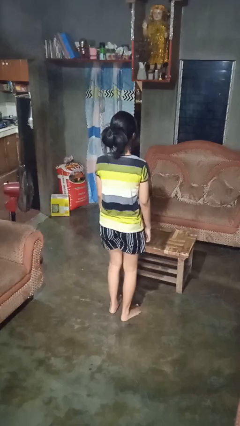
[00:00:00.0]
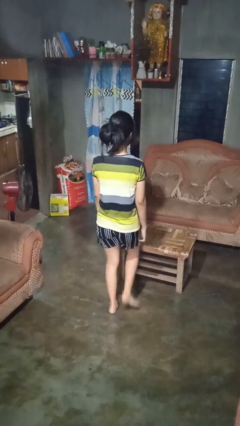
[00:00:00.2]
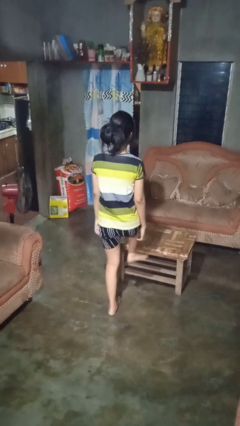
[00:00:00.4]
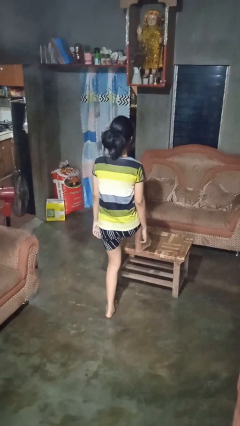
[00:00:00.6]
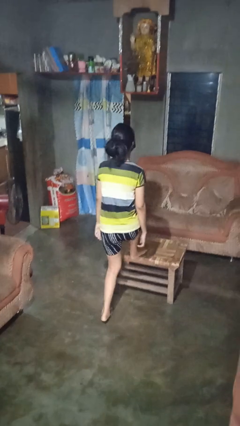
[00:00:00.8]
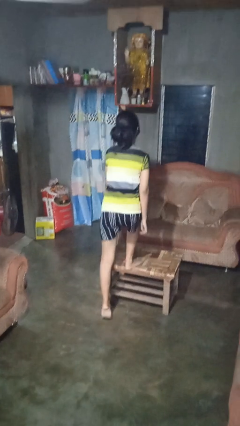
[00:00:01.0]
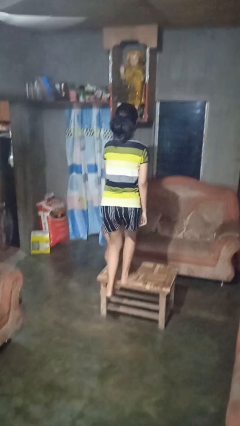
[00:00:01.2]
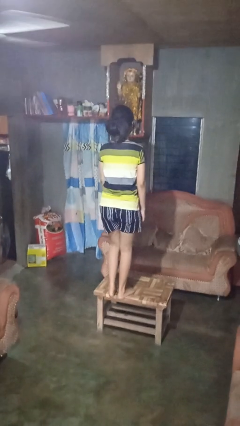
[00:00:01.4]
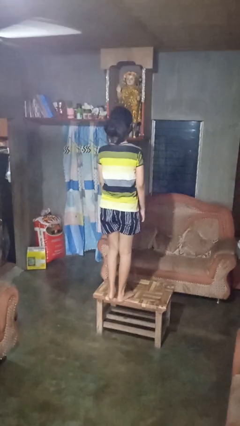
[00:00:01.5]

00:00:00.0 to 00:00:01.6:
person climbs on table

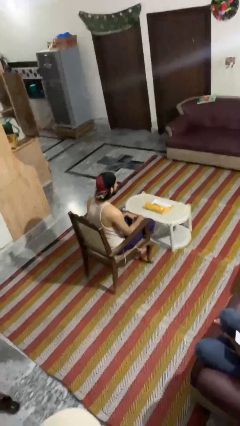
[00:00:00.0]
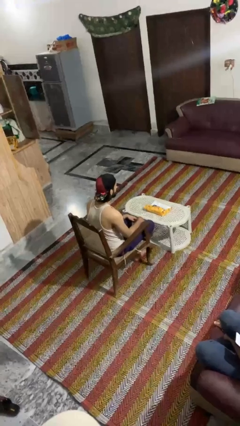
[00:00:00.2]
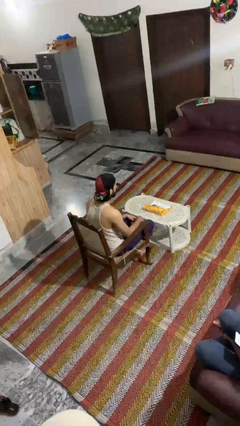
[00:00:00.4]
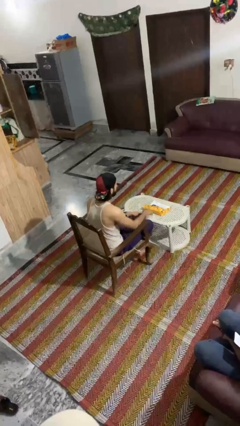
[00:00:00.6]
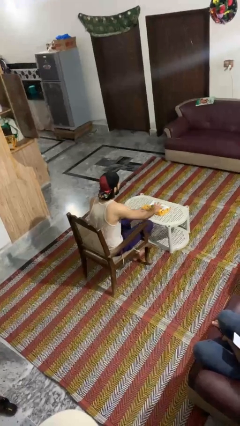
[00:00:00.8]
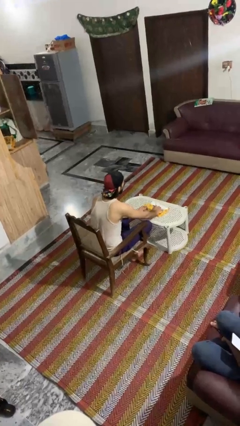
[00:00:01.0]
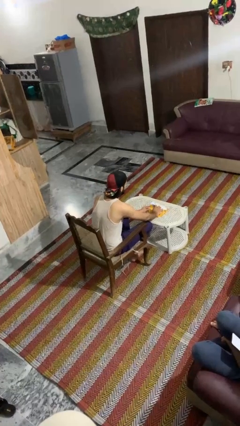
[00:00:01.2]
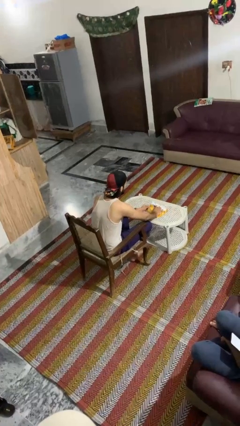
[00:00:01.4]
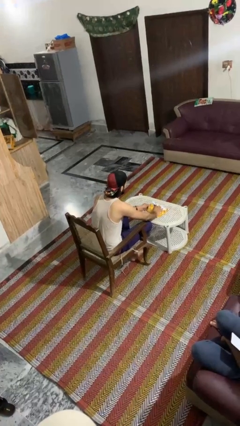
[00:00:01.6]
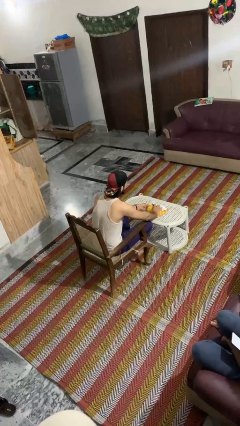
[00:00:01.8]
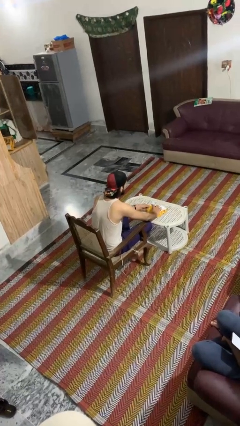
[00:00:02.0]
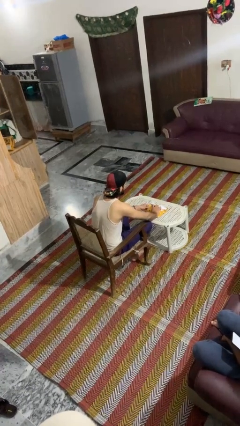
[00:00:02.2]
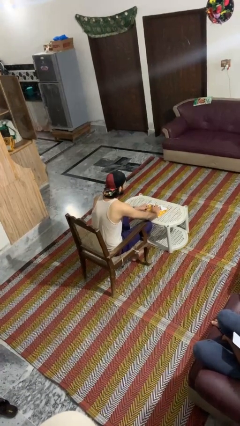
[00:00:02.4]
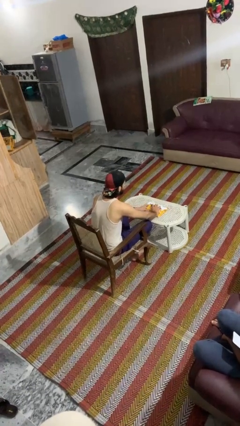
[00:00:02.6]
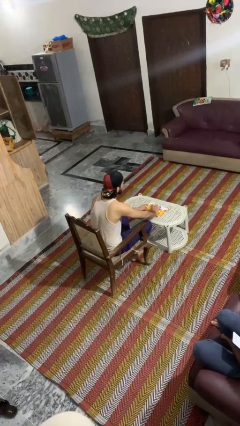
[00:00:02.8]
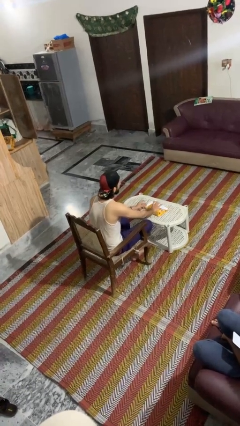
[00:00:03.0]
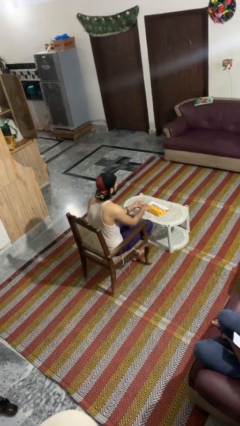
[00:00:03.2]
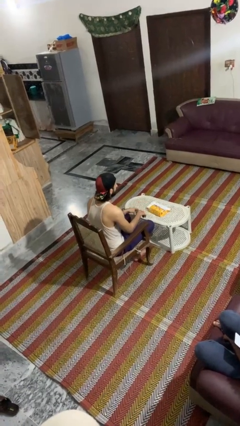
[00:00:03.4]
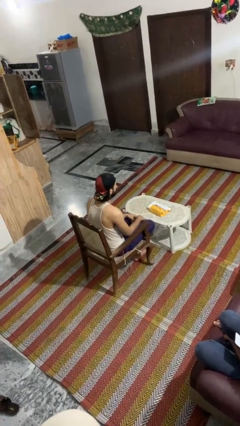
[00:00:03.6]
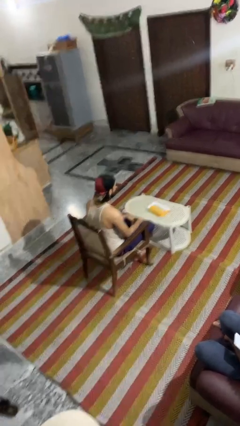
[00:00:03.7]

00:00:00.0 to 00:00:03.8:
person wraps box

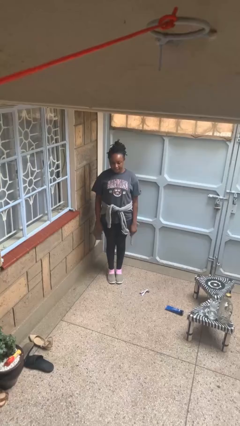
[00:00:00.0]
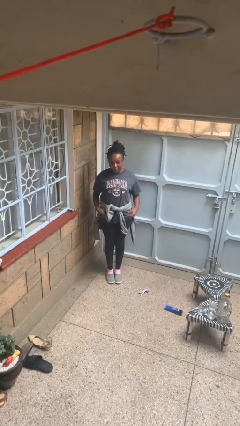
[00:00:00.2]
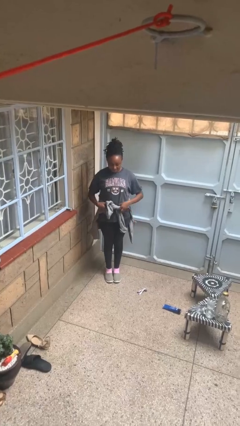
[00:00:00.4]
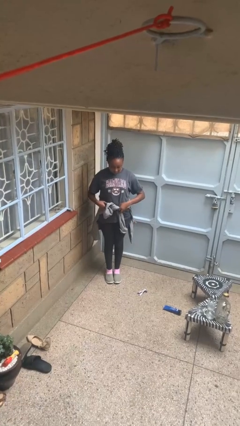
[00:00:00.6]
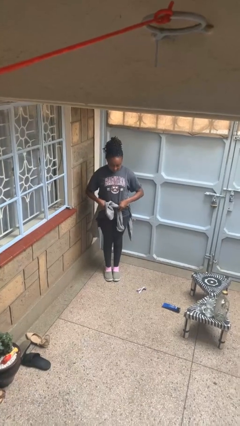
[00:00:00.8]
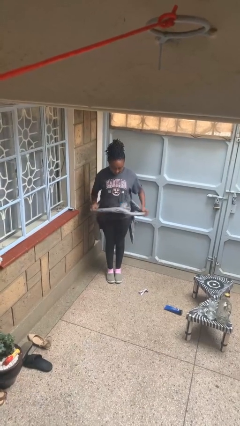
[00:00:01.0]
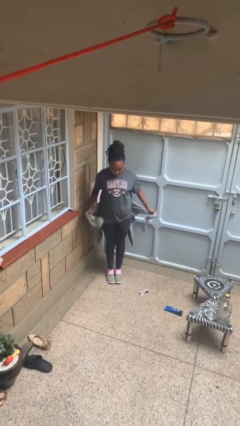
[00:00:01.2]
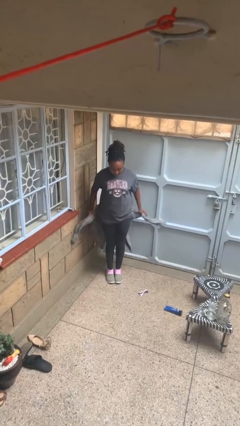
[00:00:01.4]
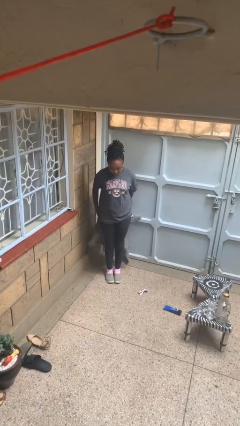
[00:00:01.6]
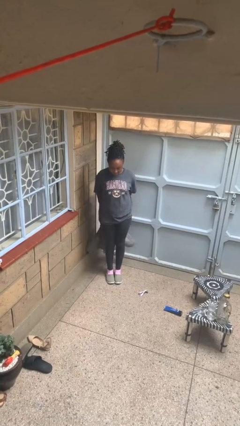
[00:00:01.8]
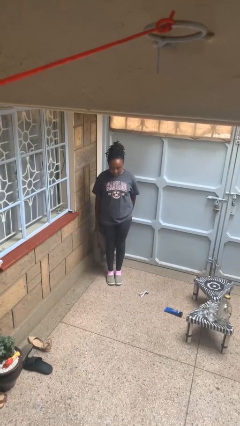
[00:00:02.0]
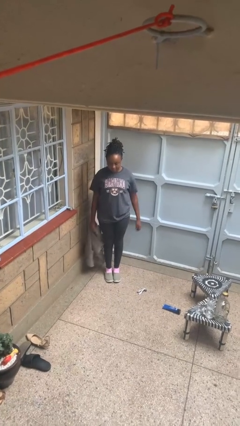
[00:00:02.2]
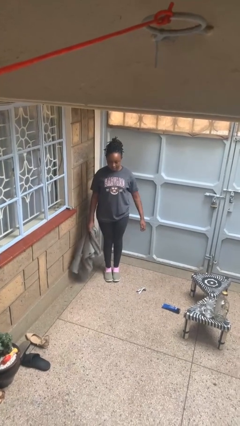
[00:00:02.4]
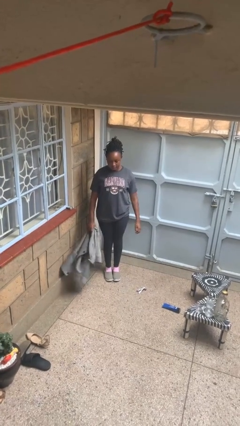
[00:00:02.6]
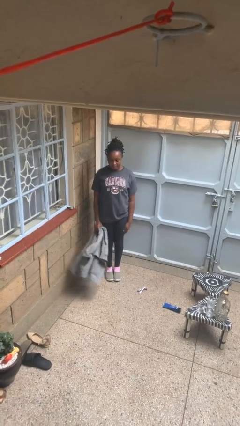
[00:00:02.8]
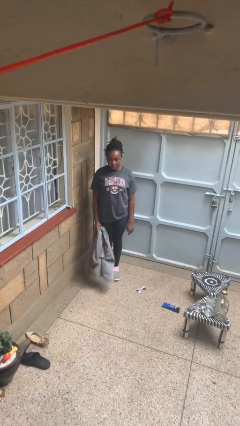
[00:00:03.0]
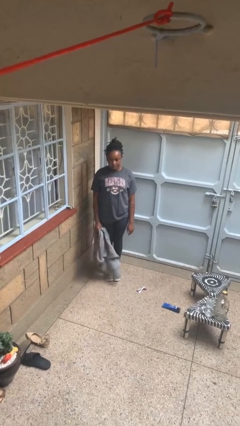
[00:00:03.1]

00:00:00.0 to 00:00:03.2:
person unties jacket around waist

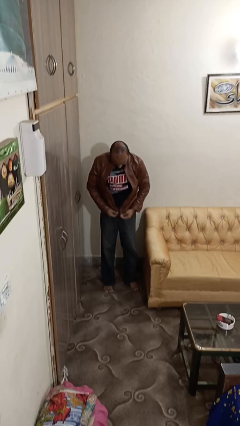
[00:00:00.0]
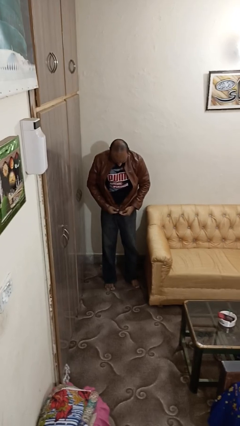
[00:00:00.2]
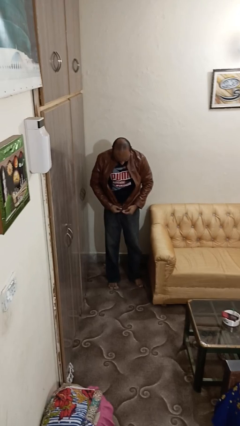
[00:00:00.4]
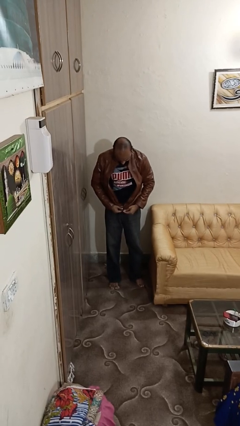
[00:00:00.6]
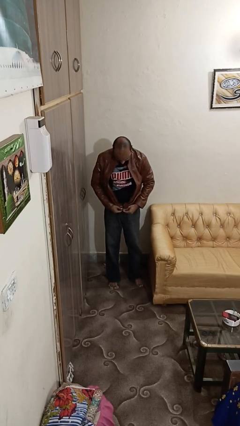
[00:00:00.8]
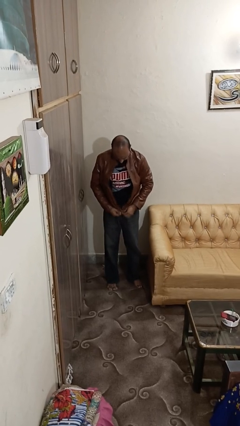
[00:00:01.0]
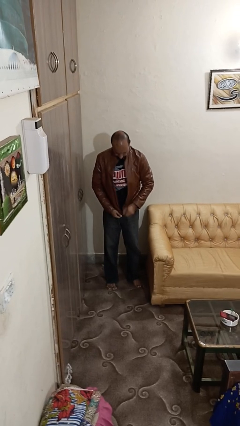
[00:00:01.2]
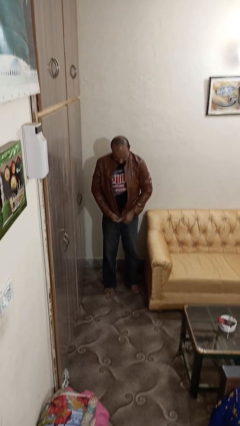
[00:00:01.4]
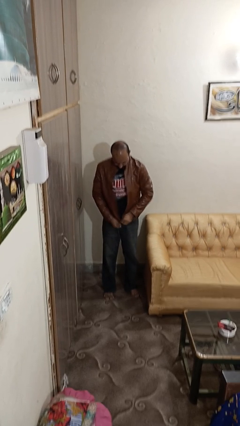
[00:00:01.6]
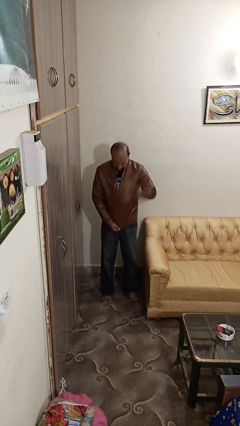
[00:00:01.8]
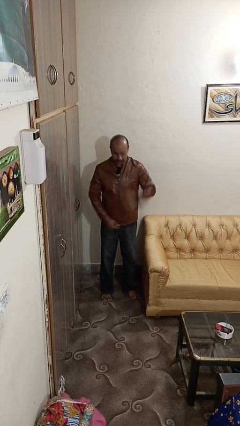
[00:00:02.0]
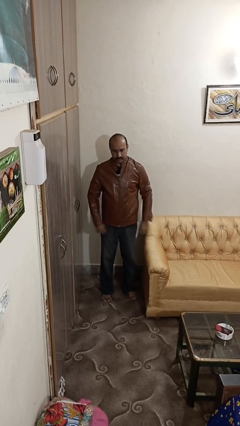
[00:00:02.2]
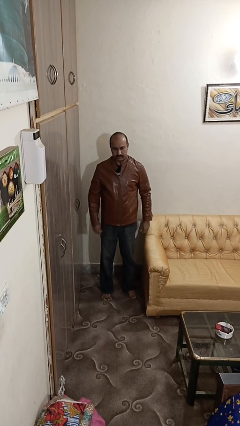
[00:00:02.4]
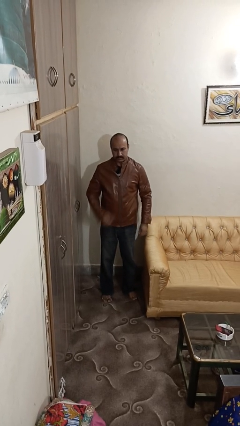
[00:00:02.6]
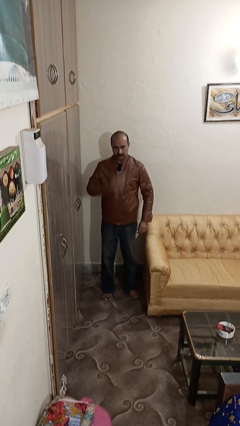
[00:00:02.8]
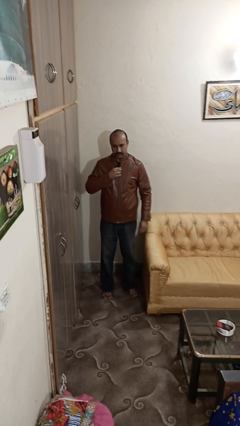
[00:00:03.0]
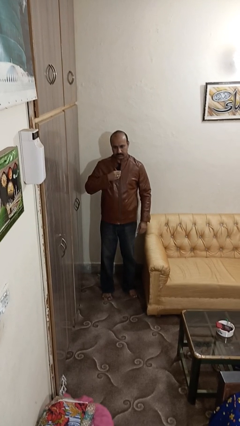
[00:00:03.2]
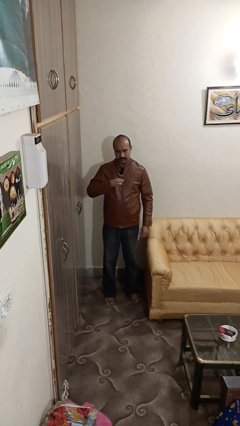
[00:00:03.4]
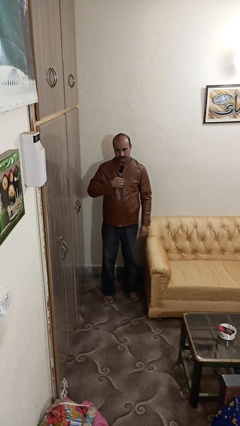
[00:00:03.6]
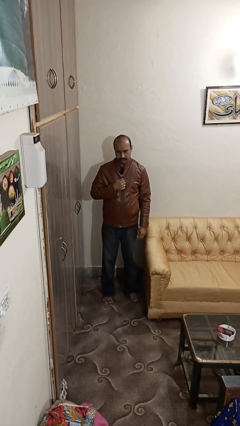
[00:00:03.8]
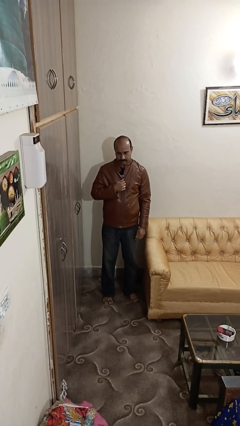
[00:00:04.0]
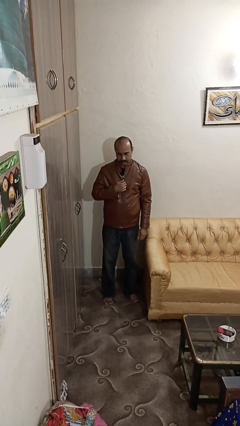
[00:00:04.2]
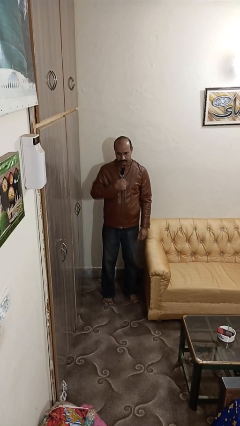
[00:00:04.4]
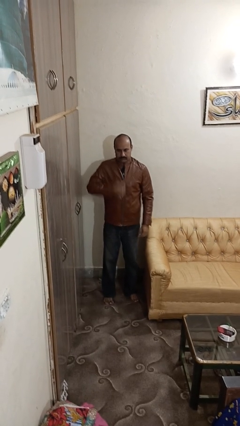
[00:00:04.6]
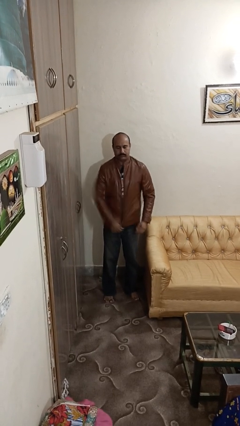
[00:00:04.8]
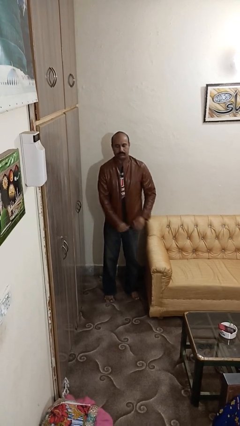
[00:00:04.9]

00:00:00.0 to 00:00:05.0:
person zips up jacket

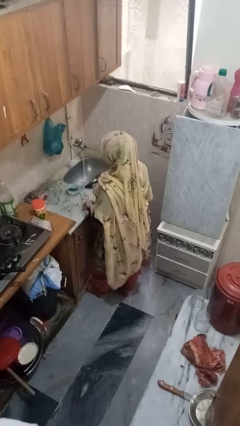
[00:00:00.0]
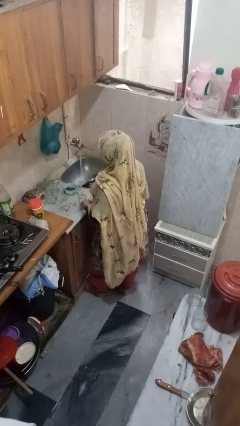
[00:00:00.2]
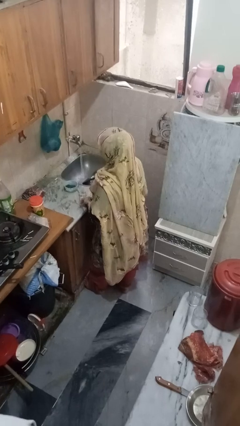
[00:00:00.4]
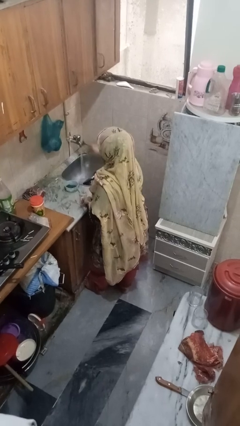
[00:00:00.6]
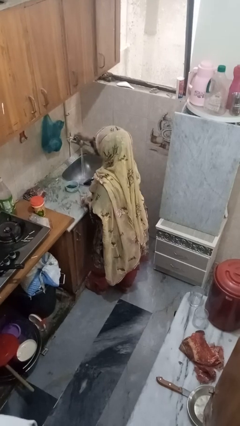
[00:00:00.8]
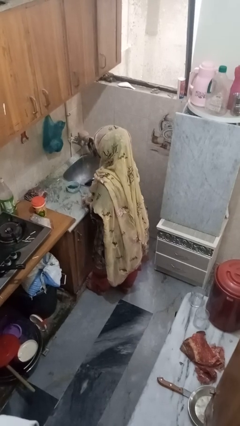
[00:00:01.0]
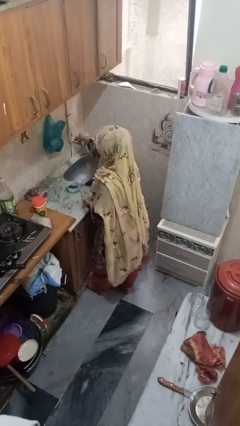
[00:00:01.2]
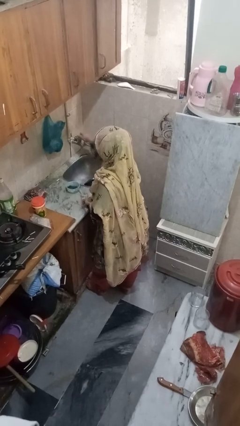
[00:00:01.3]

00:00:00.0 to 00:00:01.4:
person turns off faucet

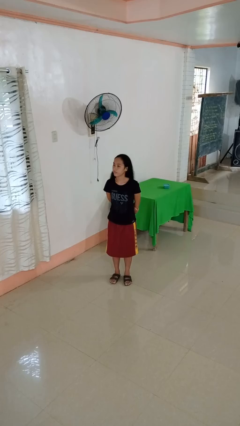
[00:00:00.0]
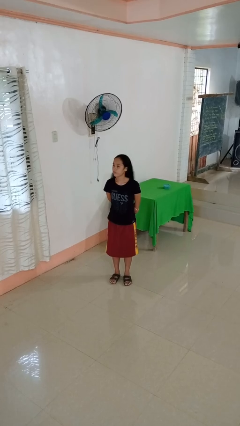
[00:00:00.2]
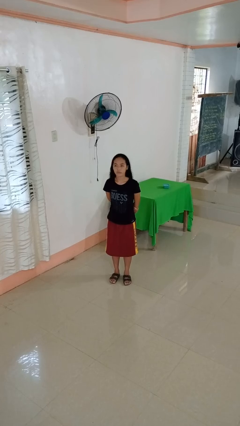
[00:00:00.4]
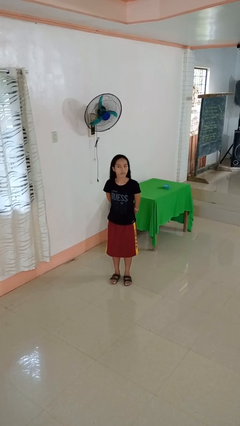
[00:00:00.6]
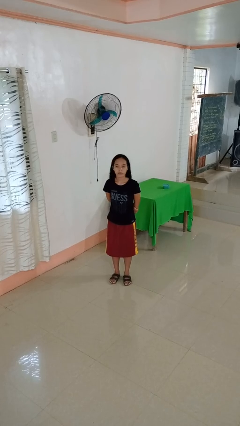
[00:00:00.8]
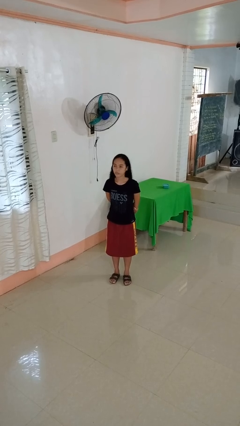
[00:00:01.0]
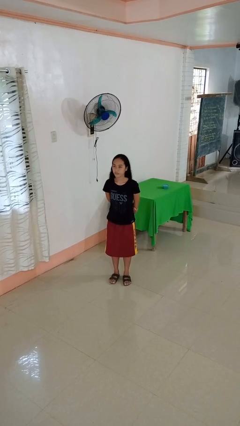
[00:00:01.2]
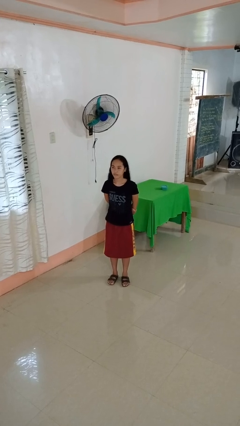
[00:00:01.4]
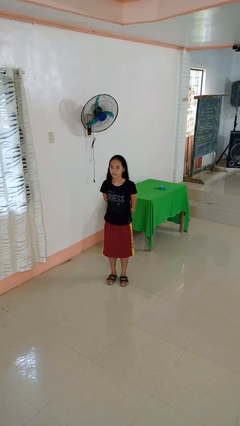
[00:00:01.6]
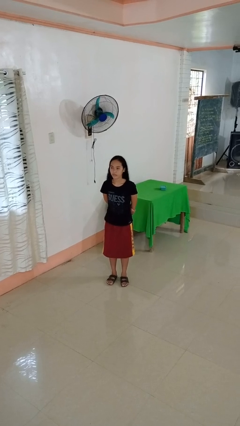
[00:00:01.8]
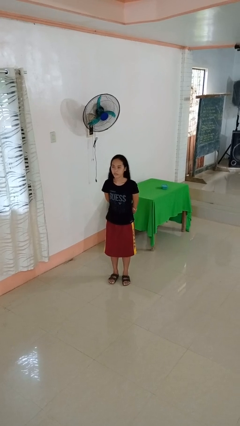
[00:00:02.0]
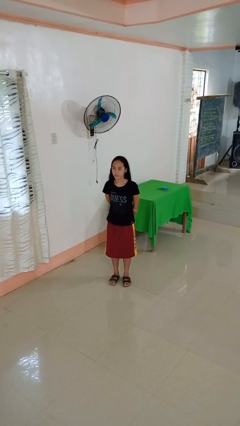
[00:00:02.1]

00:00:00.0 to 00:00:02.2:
person shakes head
